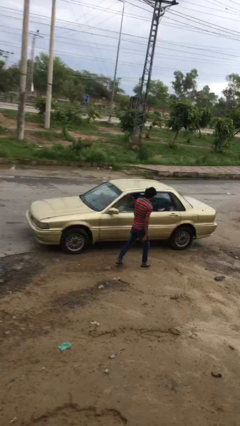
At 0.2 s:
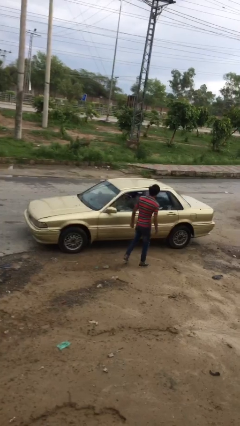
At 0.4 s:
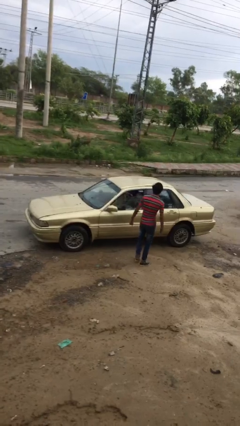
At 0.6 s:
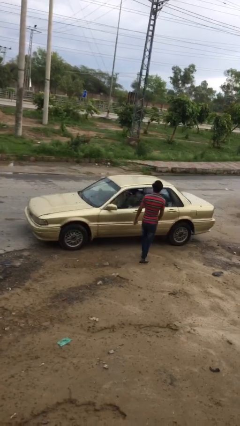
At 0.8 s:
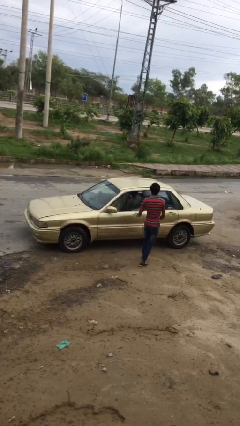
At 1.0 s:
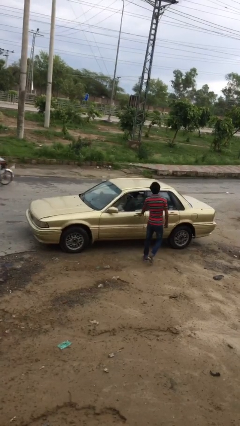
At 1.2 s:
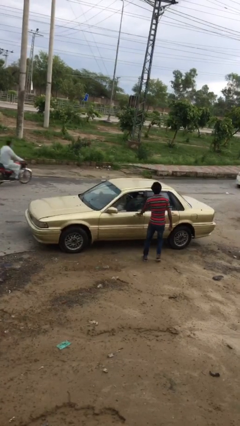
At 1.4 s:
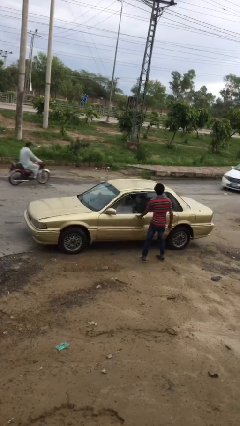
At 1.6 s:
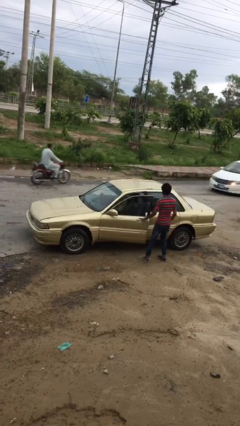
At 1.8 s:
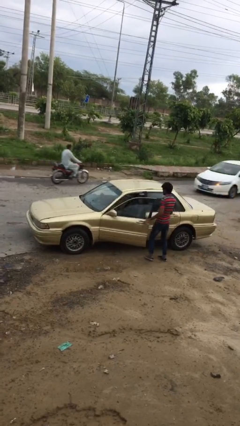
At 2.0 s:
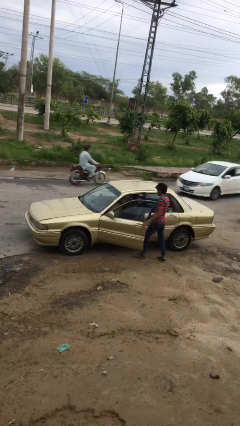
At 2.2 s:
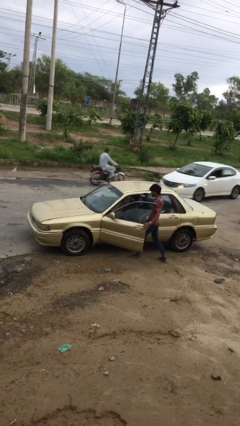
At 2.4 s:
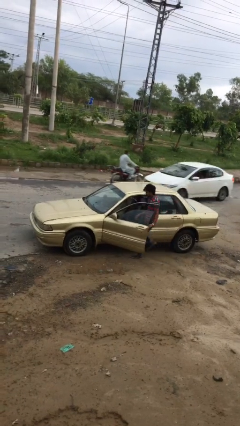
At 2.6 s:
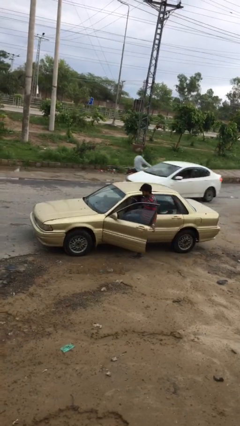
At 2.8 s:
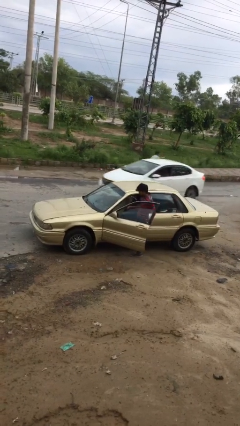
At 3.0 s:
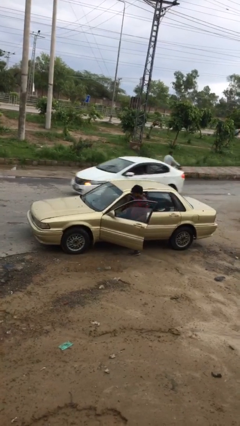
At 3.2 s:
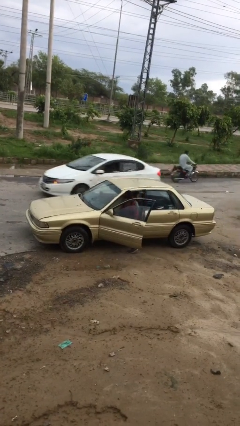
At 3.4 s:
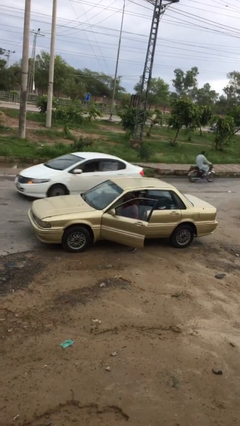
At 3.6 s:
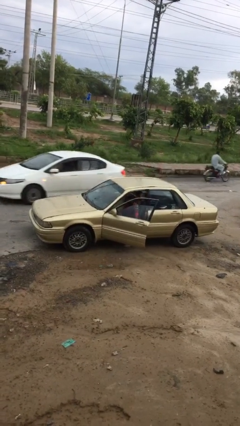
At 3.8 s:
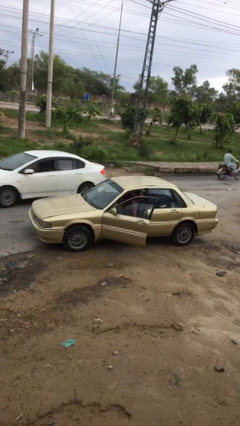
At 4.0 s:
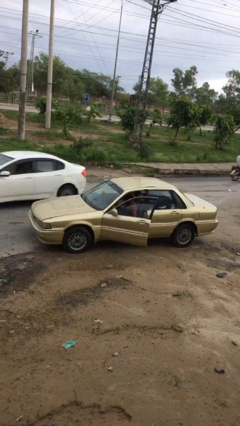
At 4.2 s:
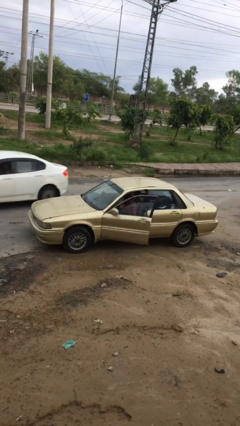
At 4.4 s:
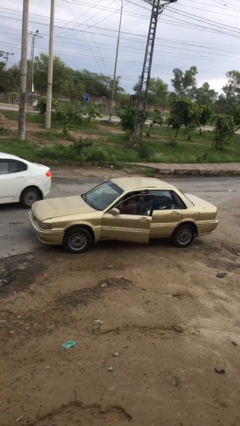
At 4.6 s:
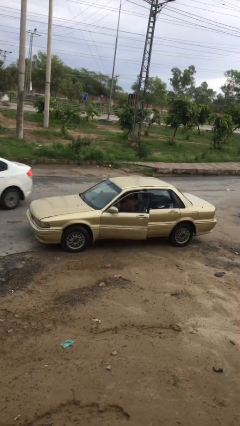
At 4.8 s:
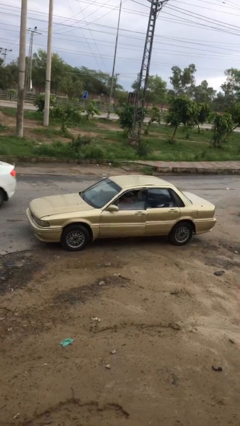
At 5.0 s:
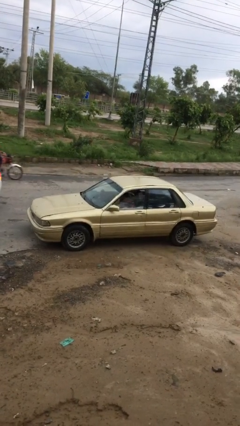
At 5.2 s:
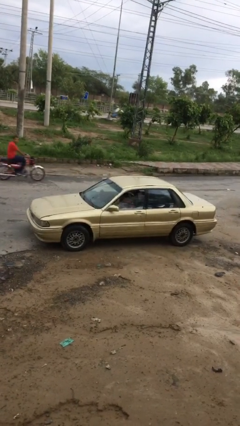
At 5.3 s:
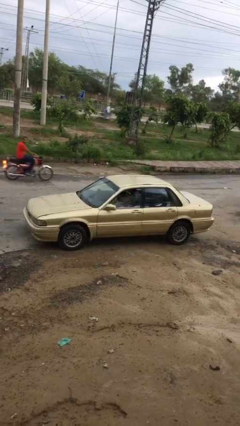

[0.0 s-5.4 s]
car picks up person

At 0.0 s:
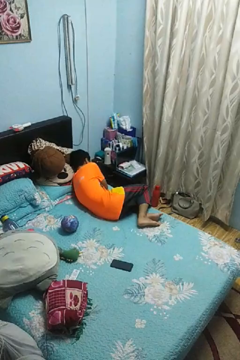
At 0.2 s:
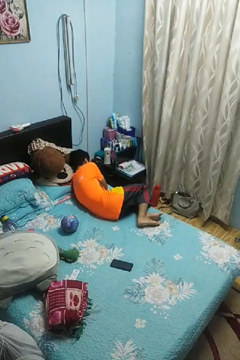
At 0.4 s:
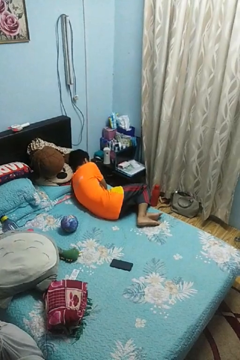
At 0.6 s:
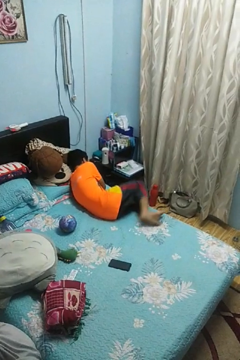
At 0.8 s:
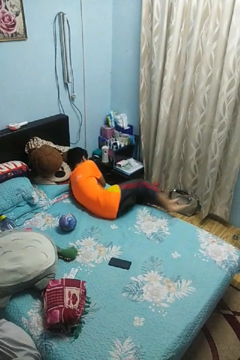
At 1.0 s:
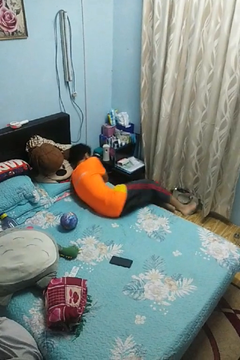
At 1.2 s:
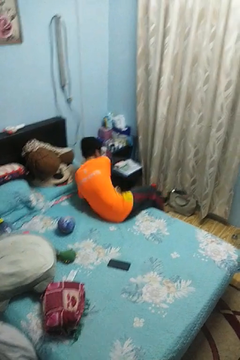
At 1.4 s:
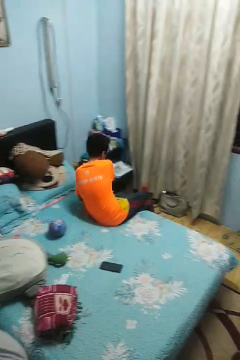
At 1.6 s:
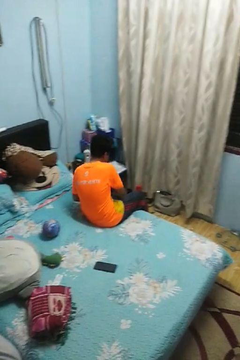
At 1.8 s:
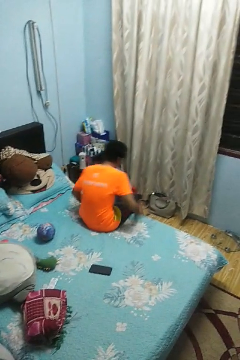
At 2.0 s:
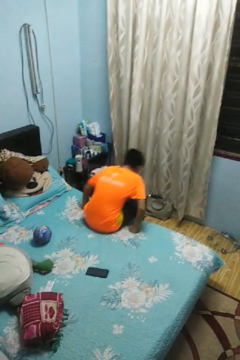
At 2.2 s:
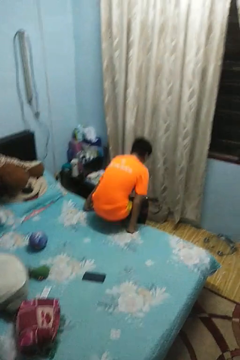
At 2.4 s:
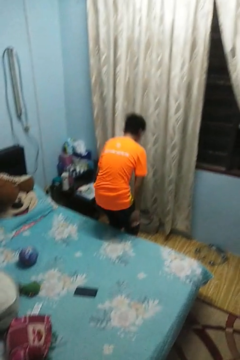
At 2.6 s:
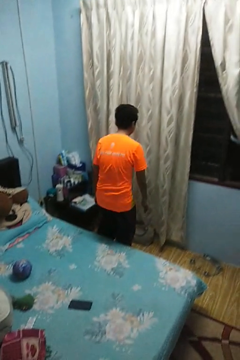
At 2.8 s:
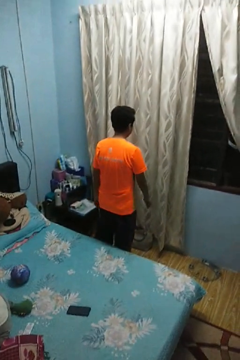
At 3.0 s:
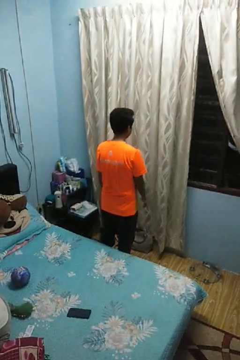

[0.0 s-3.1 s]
person stands up

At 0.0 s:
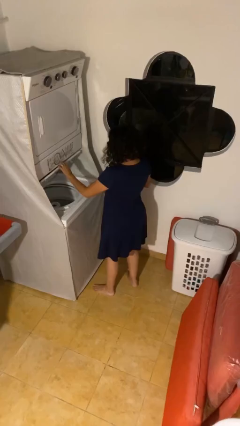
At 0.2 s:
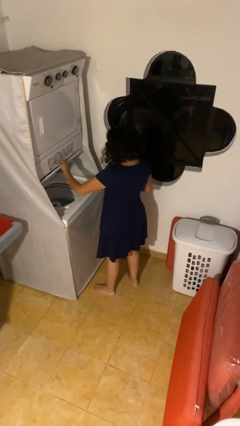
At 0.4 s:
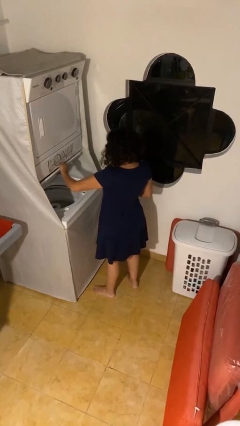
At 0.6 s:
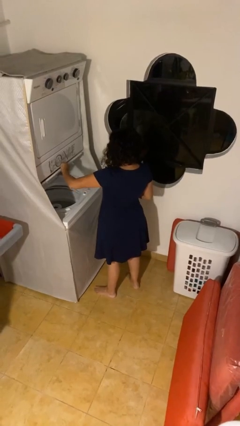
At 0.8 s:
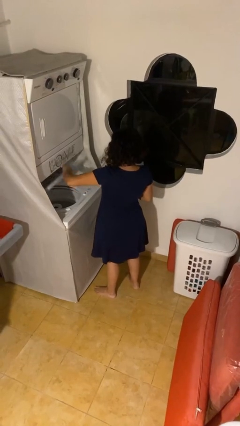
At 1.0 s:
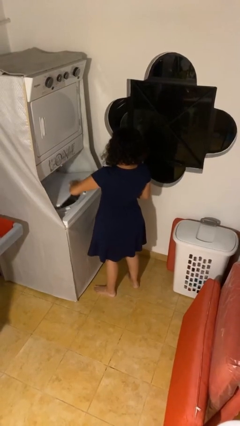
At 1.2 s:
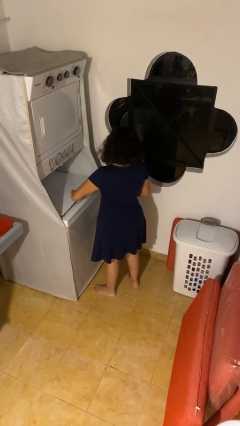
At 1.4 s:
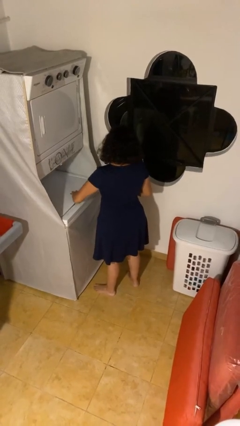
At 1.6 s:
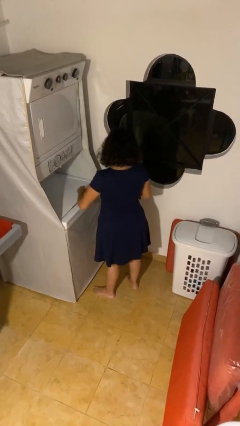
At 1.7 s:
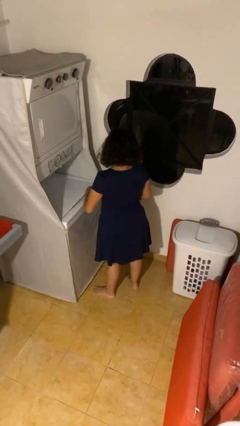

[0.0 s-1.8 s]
person closes clothes washer

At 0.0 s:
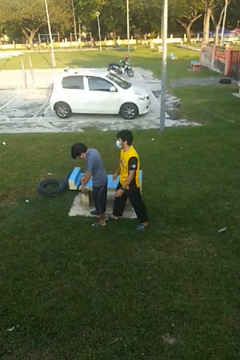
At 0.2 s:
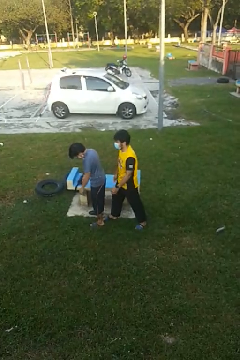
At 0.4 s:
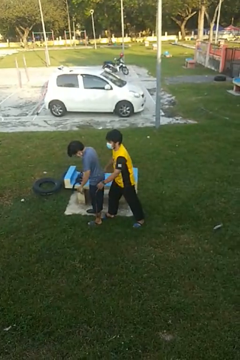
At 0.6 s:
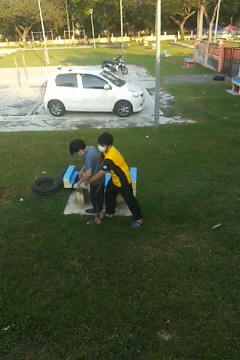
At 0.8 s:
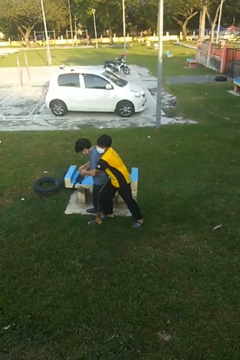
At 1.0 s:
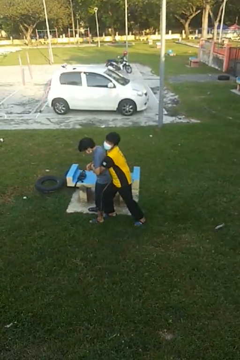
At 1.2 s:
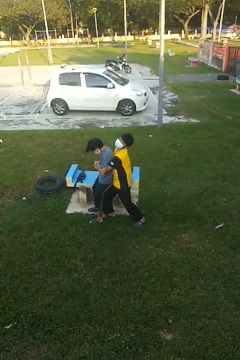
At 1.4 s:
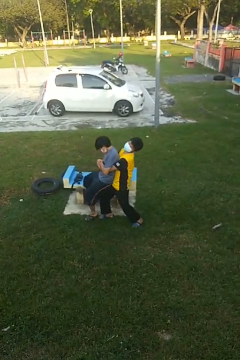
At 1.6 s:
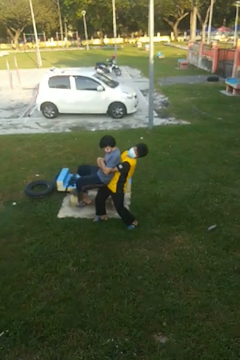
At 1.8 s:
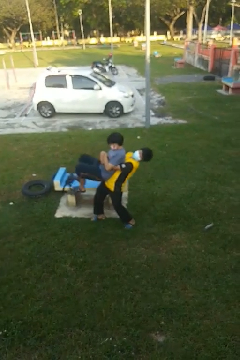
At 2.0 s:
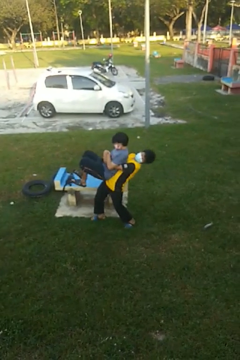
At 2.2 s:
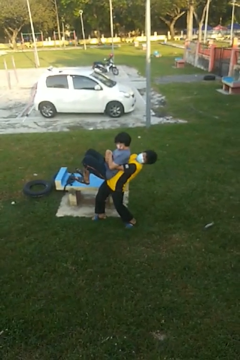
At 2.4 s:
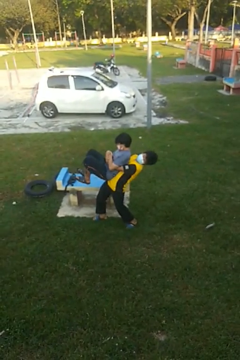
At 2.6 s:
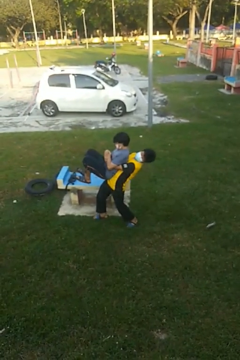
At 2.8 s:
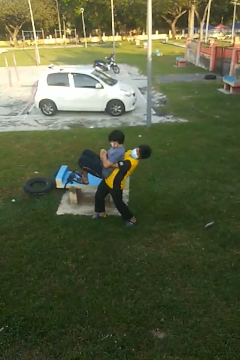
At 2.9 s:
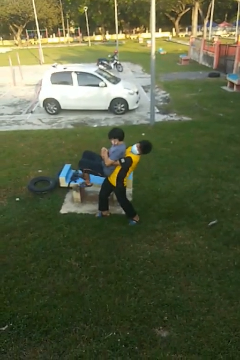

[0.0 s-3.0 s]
person picks up person

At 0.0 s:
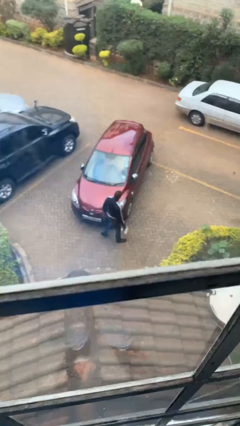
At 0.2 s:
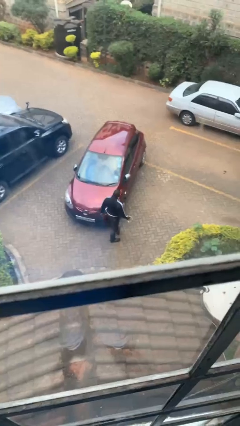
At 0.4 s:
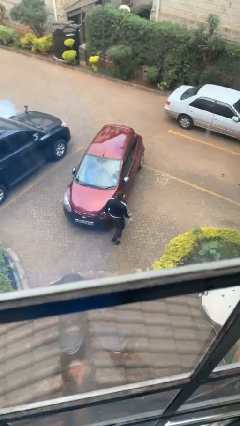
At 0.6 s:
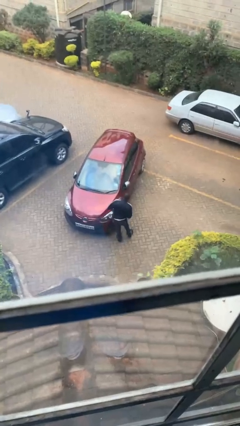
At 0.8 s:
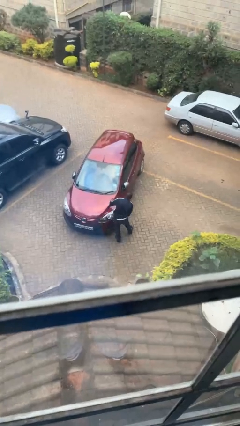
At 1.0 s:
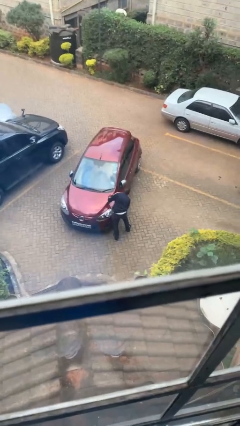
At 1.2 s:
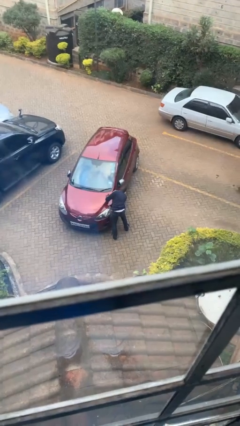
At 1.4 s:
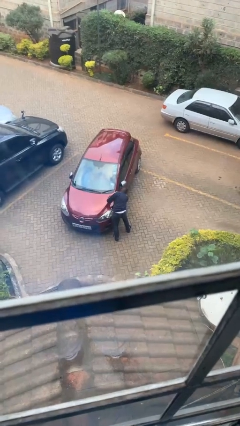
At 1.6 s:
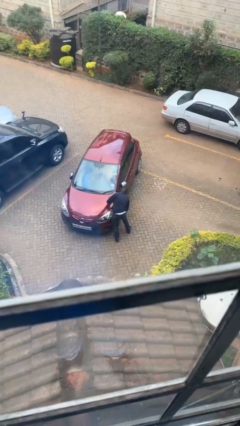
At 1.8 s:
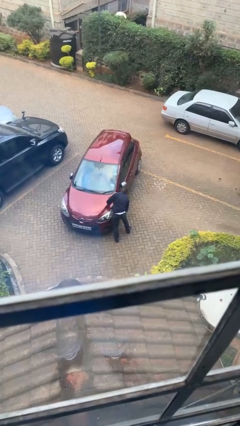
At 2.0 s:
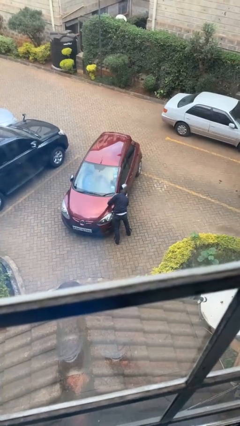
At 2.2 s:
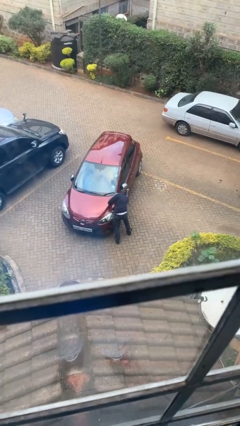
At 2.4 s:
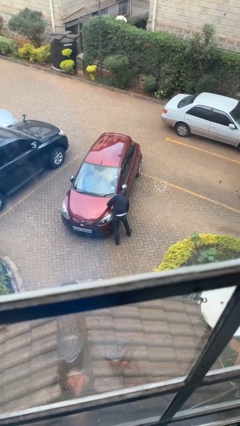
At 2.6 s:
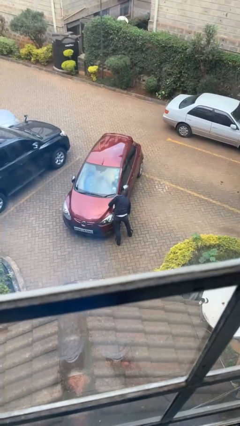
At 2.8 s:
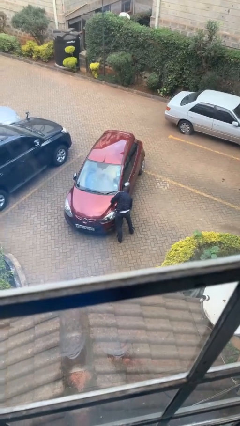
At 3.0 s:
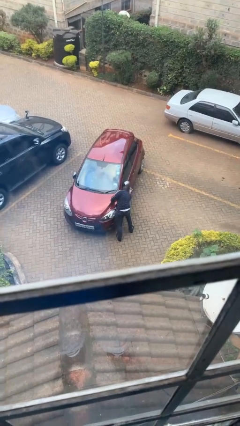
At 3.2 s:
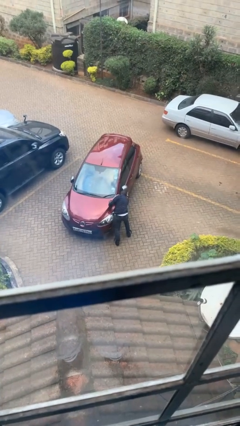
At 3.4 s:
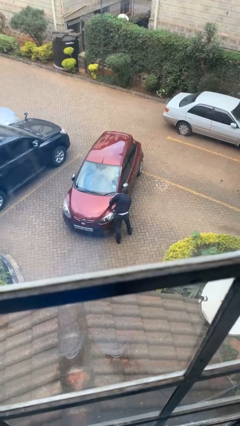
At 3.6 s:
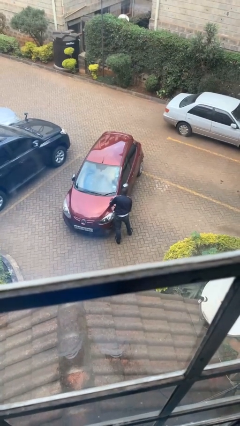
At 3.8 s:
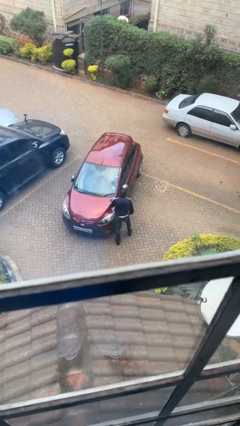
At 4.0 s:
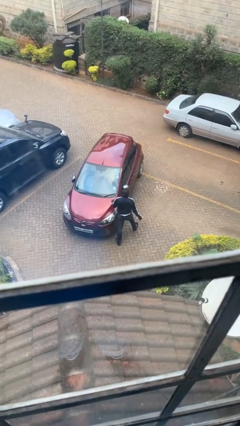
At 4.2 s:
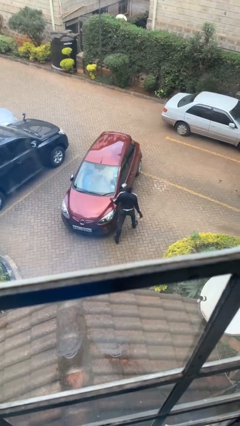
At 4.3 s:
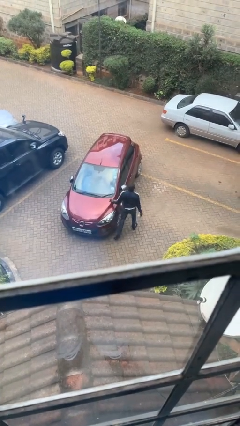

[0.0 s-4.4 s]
person polishes car with rag

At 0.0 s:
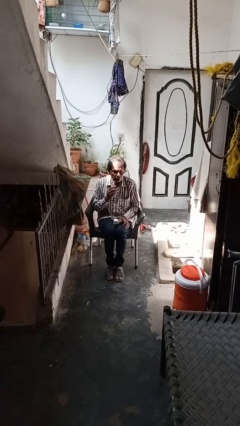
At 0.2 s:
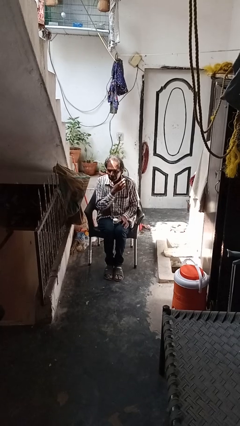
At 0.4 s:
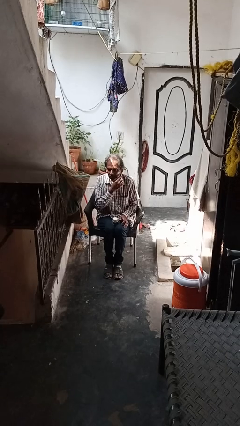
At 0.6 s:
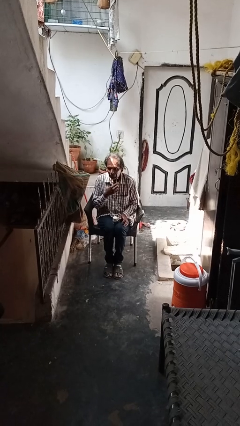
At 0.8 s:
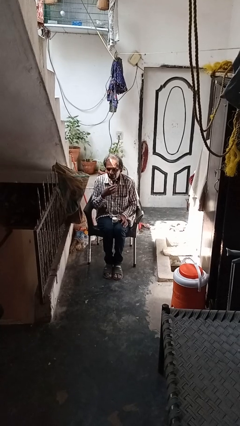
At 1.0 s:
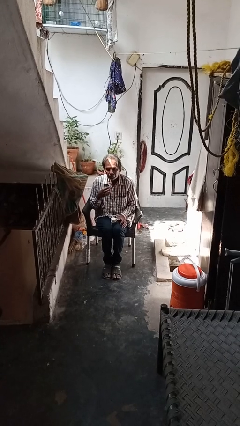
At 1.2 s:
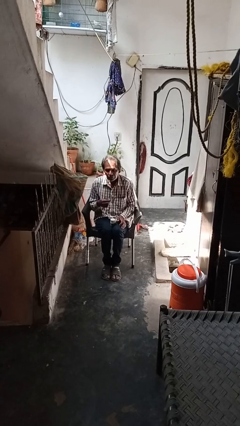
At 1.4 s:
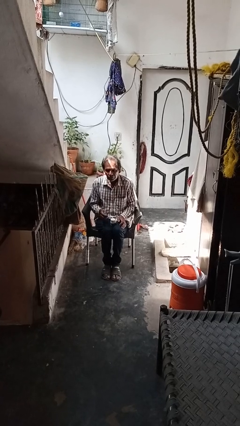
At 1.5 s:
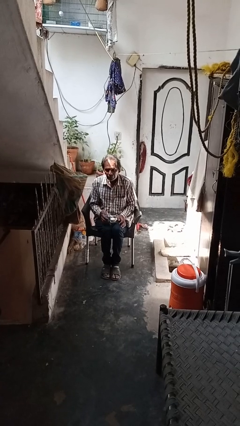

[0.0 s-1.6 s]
person shaves face
